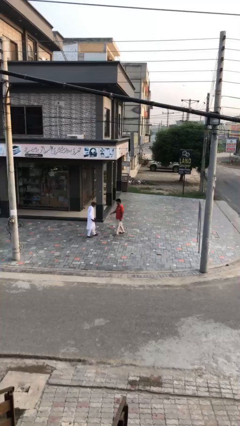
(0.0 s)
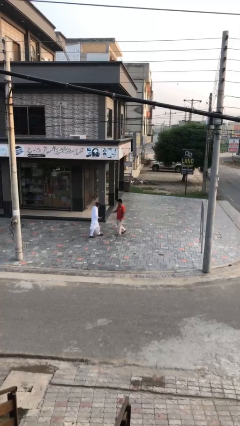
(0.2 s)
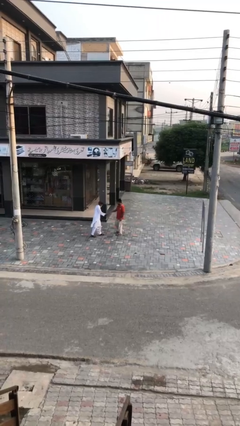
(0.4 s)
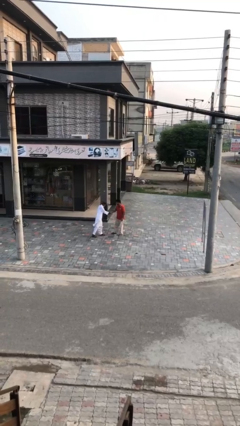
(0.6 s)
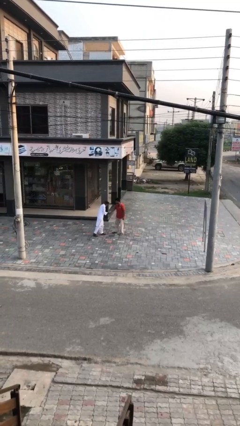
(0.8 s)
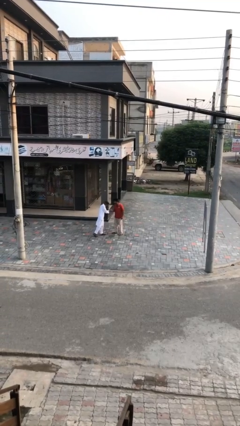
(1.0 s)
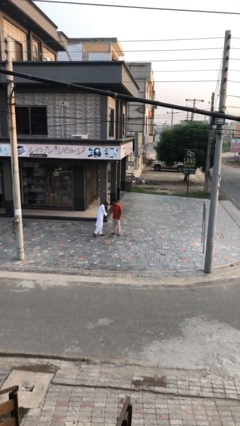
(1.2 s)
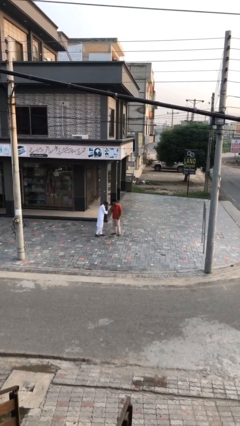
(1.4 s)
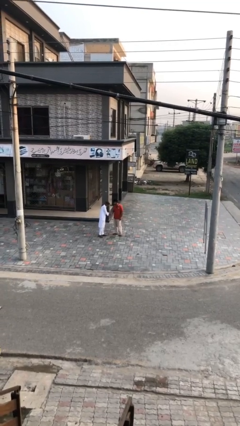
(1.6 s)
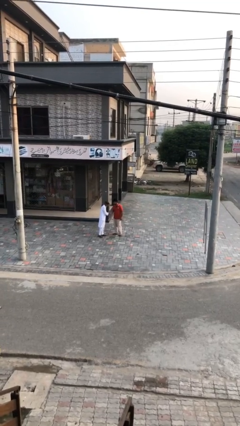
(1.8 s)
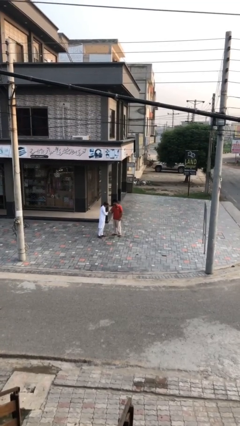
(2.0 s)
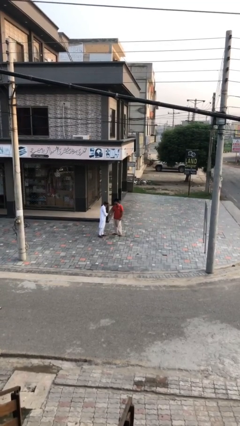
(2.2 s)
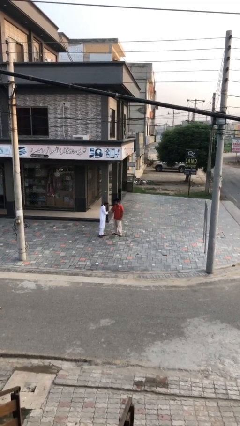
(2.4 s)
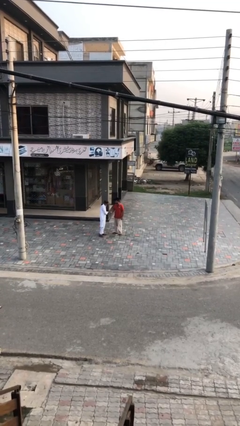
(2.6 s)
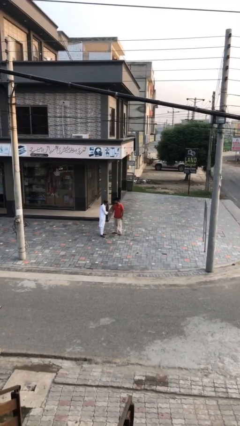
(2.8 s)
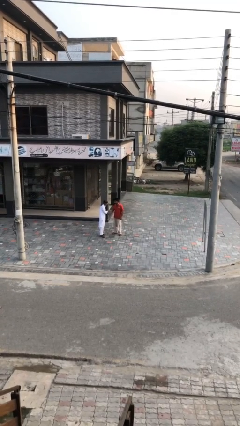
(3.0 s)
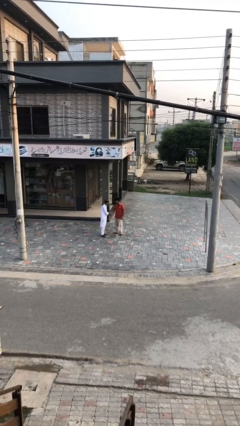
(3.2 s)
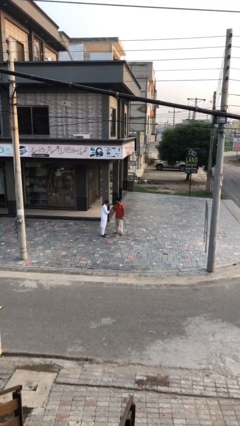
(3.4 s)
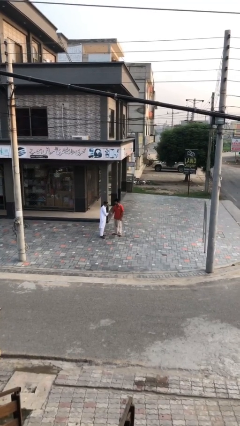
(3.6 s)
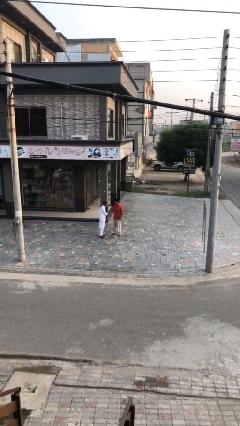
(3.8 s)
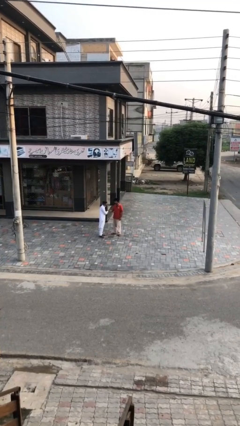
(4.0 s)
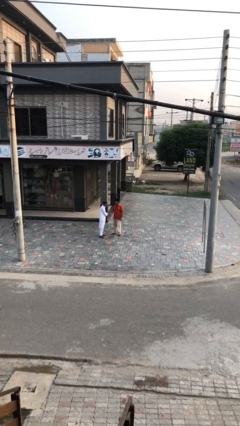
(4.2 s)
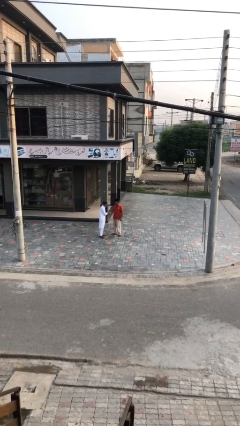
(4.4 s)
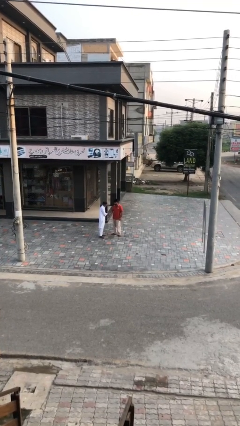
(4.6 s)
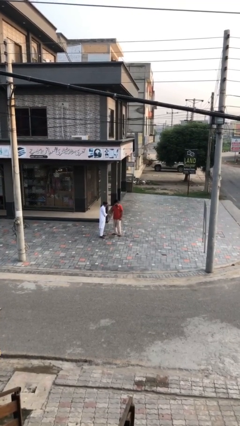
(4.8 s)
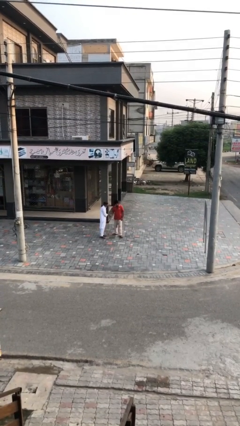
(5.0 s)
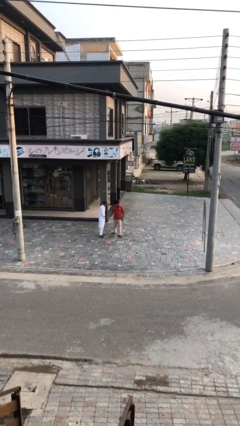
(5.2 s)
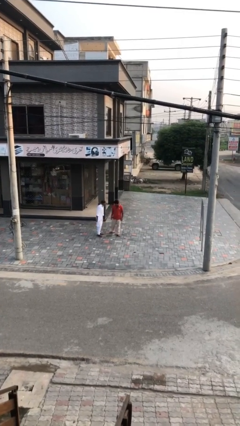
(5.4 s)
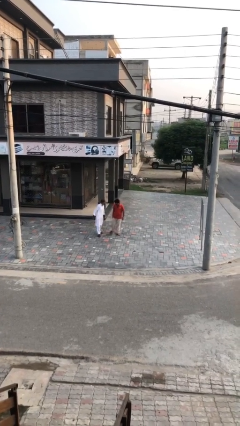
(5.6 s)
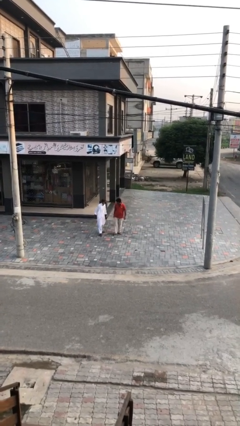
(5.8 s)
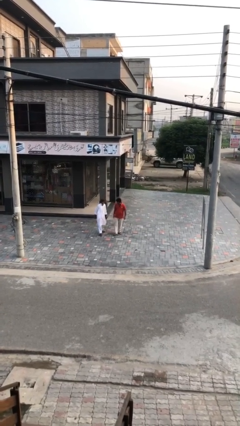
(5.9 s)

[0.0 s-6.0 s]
person shakes hand

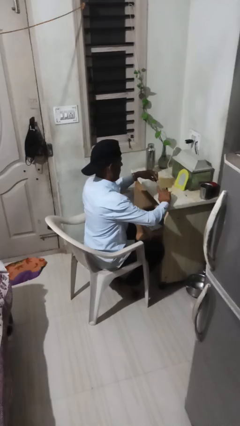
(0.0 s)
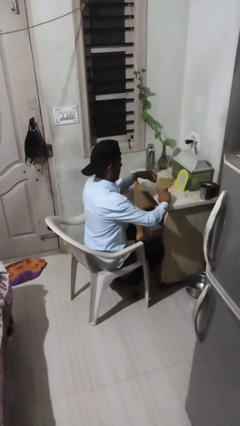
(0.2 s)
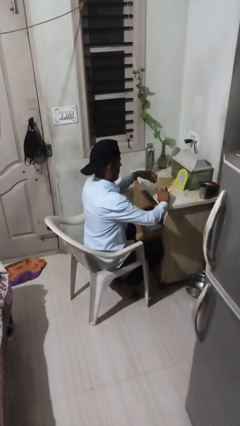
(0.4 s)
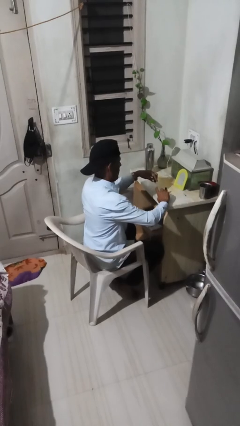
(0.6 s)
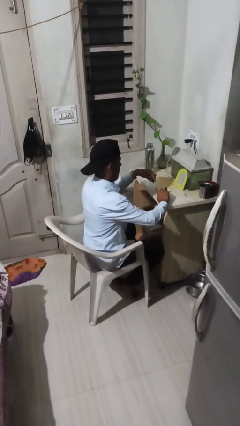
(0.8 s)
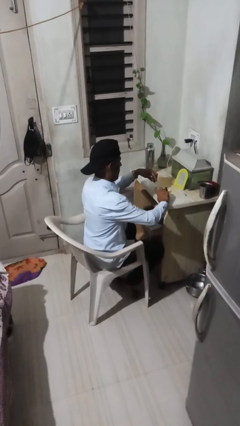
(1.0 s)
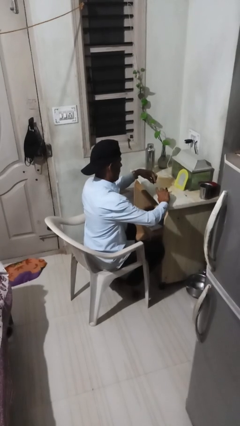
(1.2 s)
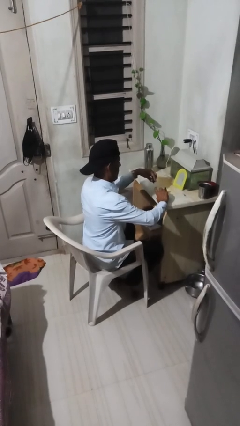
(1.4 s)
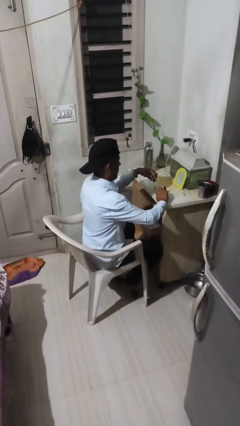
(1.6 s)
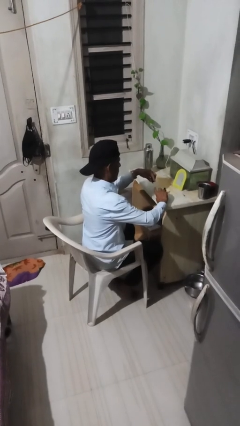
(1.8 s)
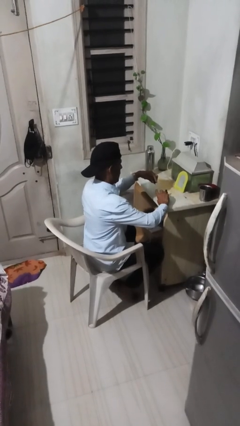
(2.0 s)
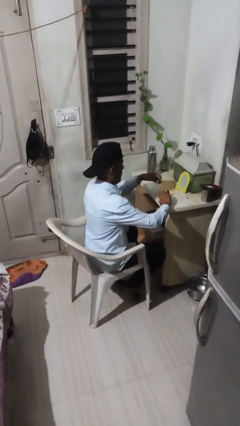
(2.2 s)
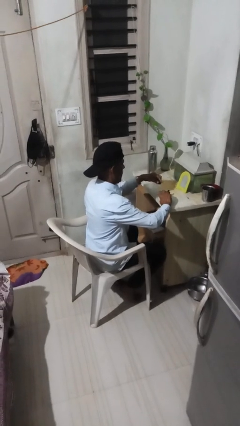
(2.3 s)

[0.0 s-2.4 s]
person paints fingernails

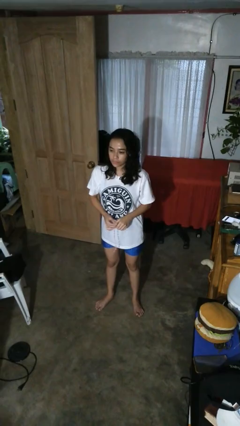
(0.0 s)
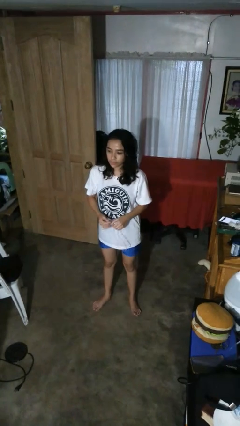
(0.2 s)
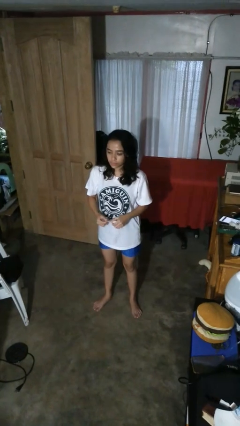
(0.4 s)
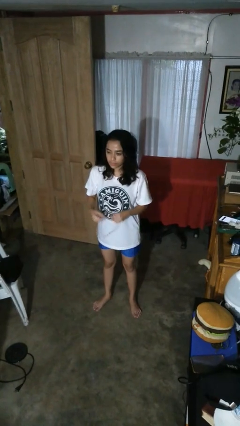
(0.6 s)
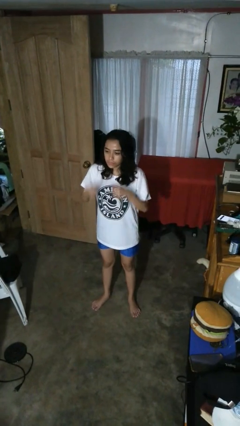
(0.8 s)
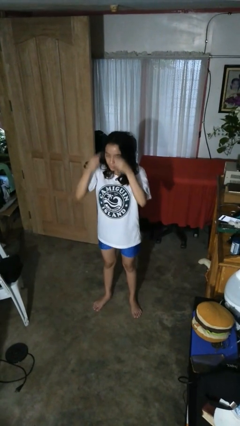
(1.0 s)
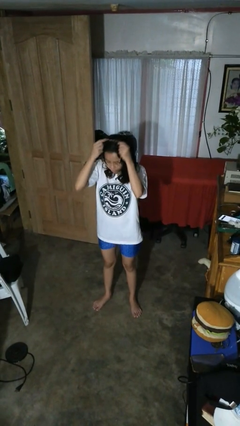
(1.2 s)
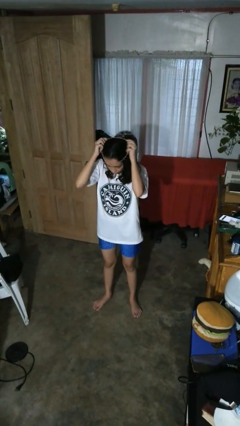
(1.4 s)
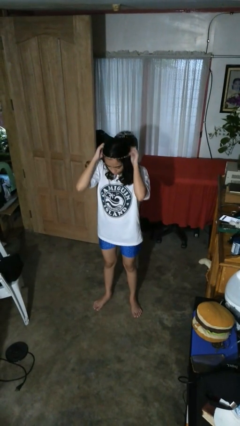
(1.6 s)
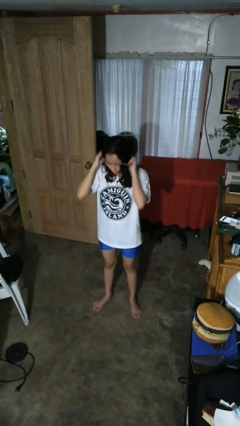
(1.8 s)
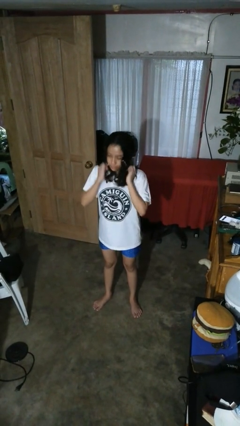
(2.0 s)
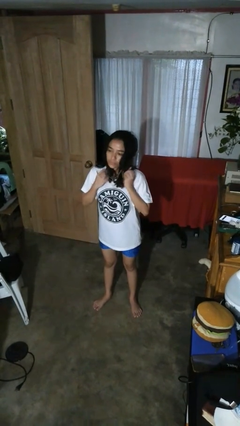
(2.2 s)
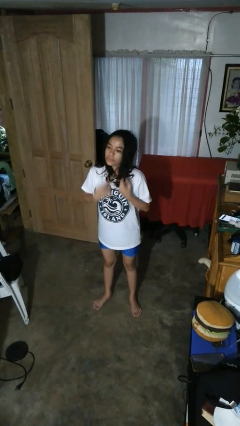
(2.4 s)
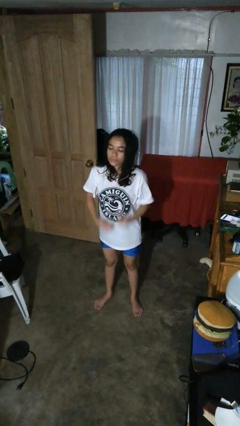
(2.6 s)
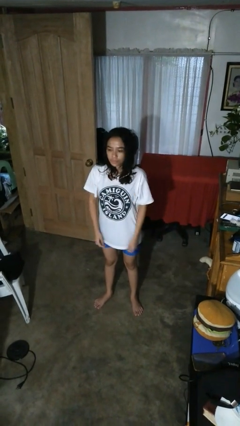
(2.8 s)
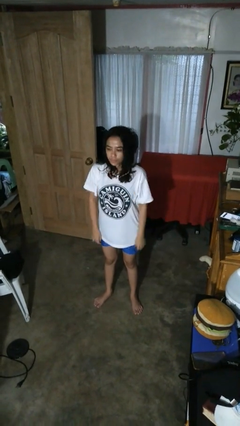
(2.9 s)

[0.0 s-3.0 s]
person puts on necklace

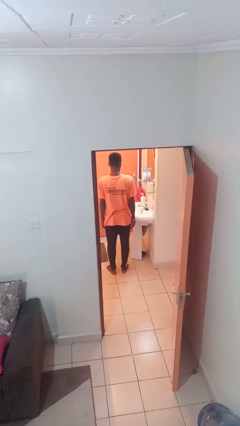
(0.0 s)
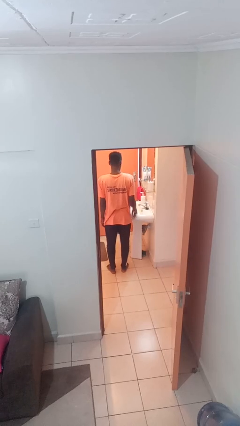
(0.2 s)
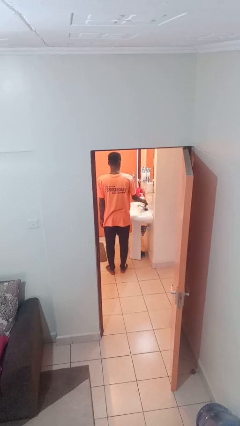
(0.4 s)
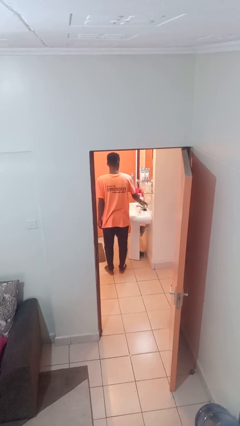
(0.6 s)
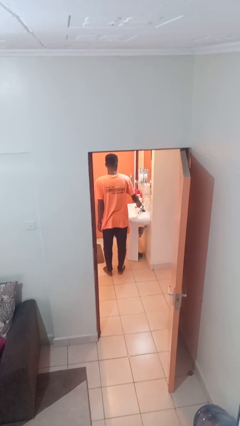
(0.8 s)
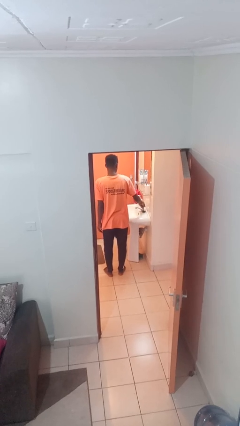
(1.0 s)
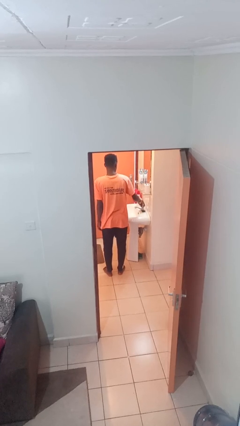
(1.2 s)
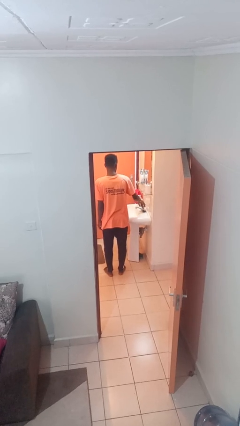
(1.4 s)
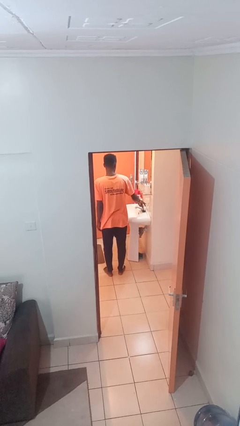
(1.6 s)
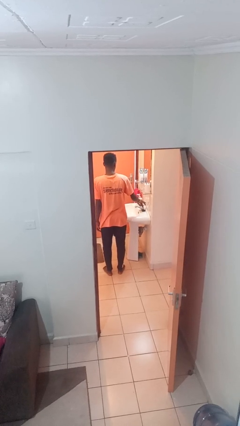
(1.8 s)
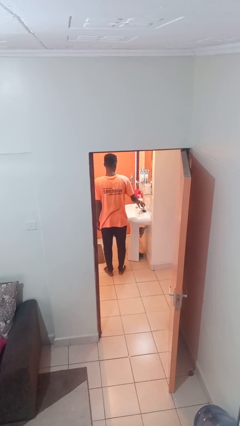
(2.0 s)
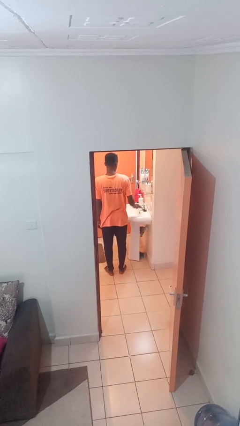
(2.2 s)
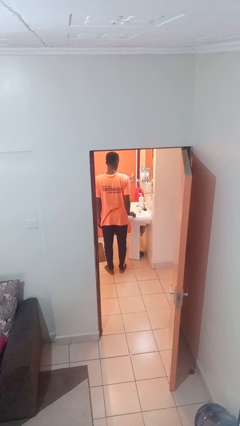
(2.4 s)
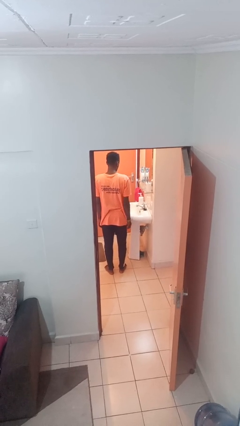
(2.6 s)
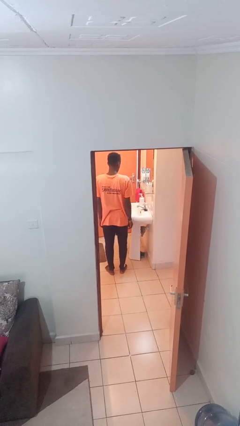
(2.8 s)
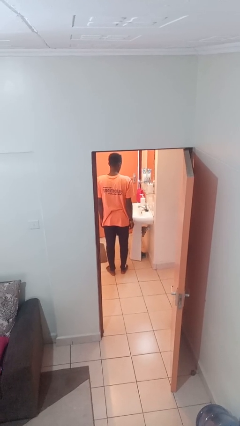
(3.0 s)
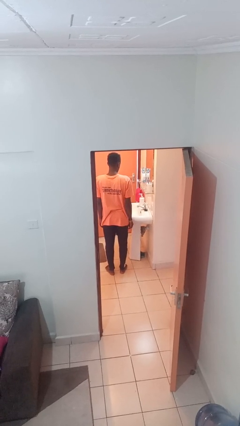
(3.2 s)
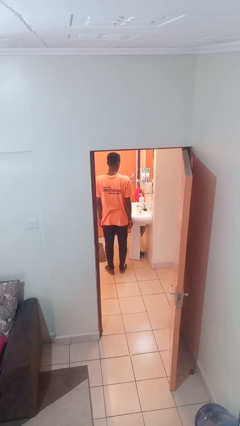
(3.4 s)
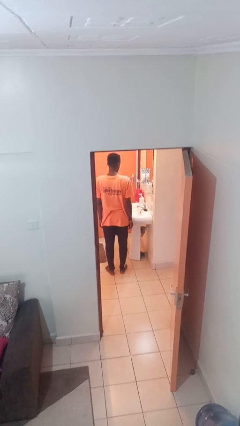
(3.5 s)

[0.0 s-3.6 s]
person turns on faucet

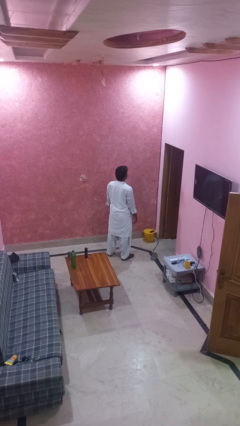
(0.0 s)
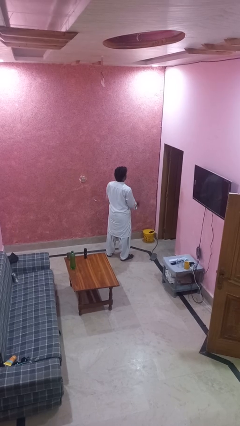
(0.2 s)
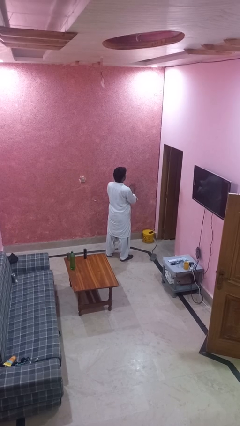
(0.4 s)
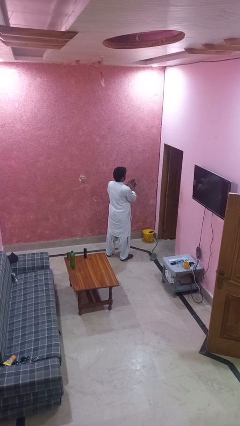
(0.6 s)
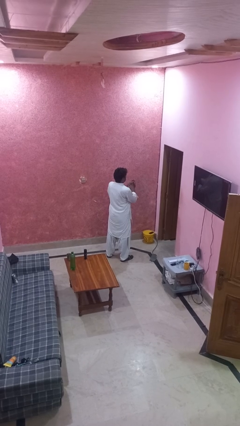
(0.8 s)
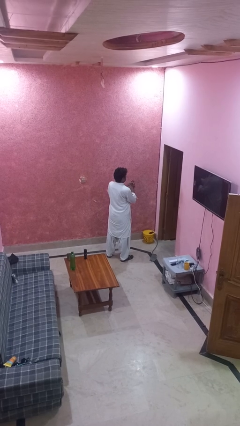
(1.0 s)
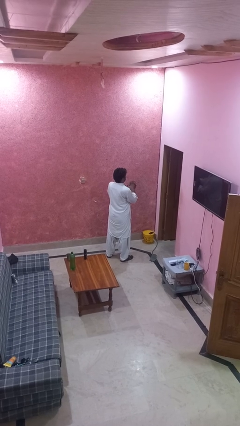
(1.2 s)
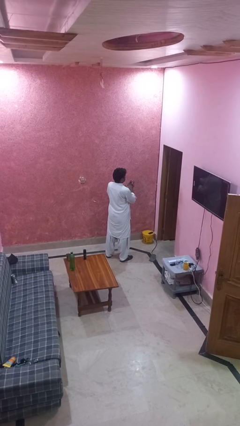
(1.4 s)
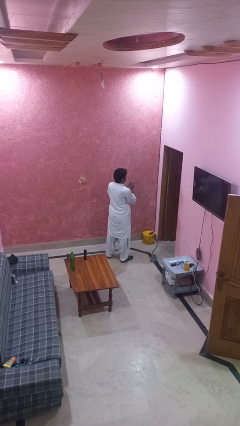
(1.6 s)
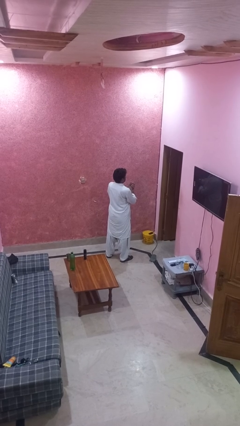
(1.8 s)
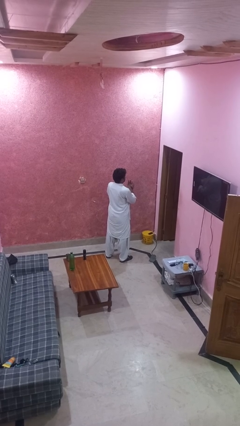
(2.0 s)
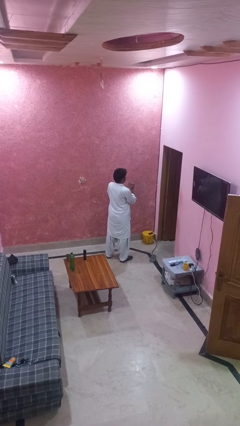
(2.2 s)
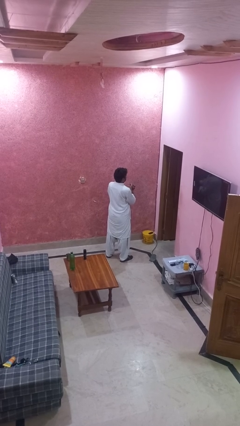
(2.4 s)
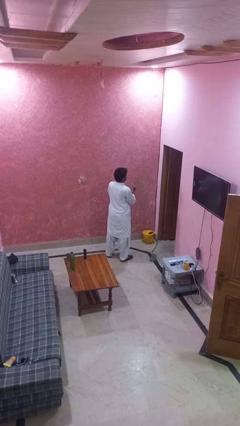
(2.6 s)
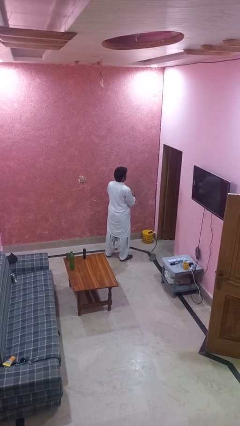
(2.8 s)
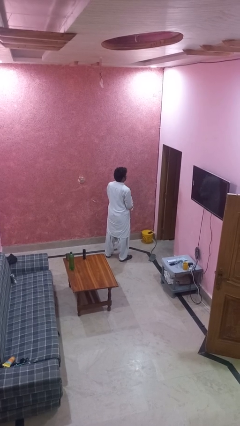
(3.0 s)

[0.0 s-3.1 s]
person snaps fingers
